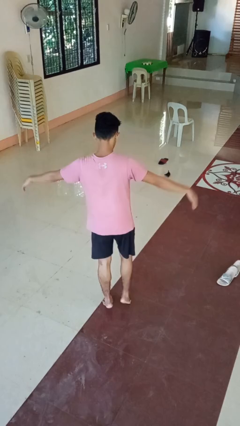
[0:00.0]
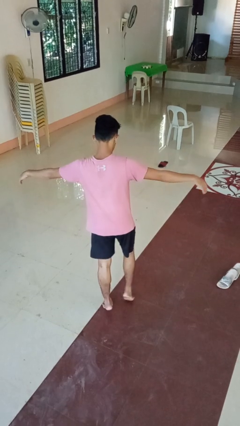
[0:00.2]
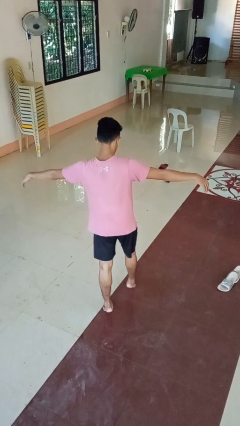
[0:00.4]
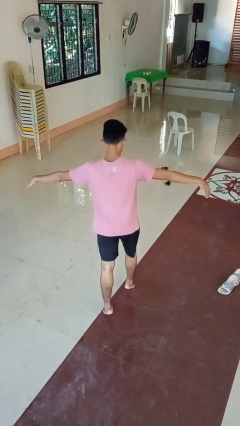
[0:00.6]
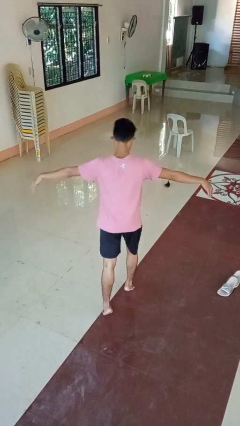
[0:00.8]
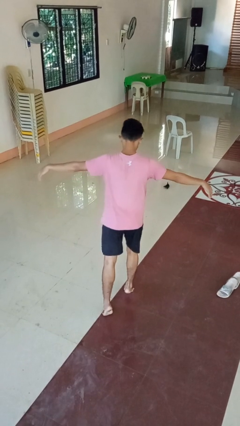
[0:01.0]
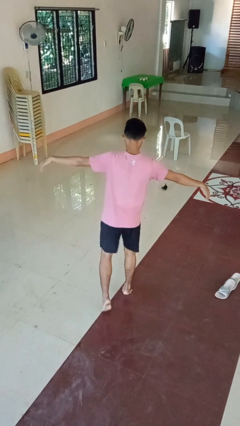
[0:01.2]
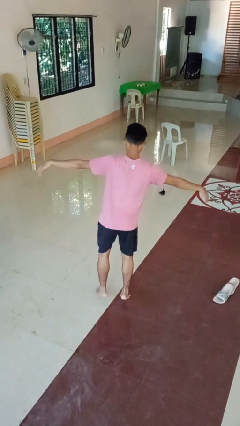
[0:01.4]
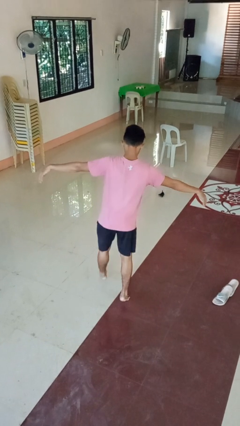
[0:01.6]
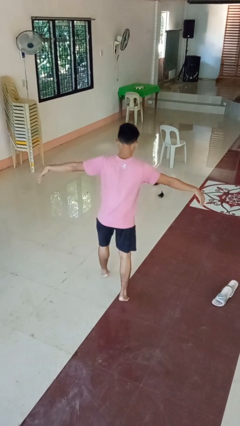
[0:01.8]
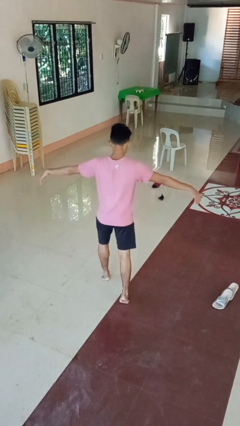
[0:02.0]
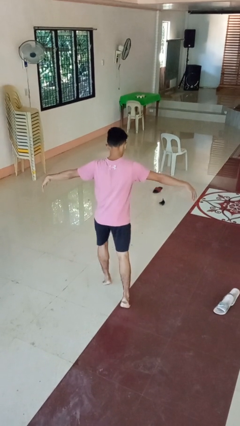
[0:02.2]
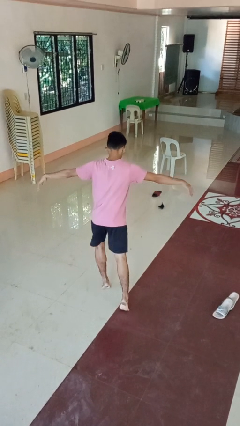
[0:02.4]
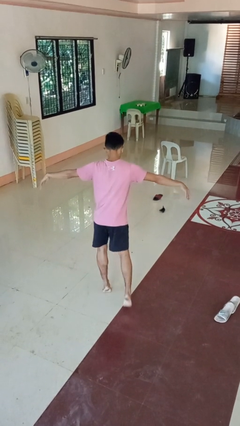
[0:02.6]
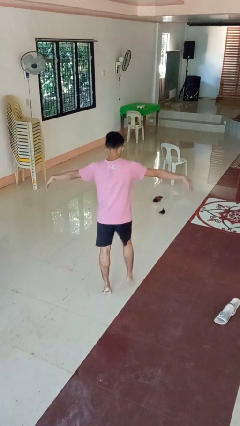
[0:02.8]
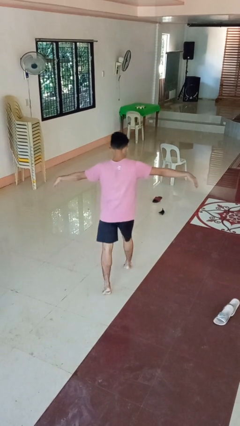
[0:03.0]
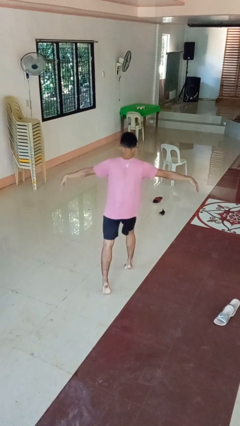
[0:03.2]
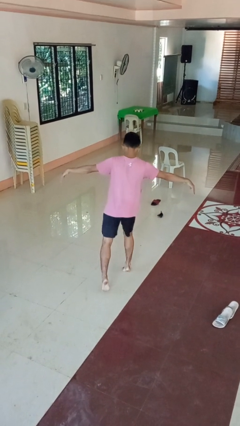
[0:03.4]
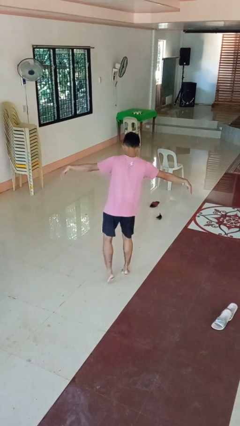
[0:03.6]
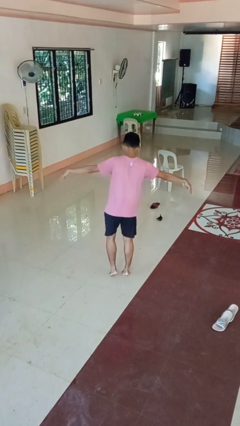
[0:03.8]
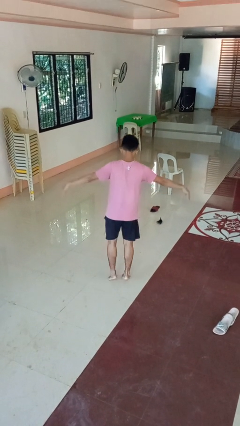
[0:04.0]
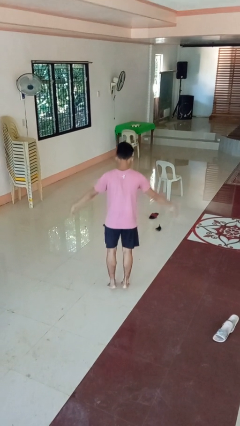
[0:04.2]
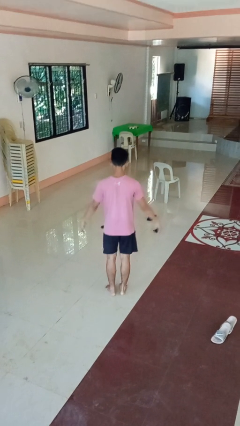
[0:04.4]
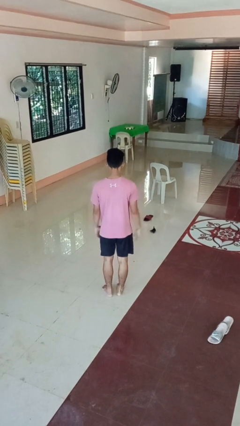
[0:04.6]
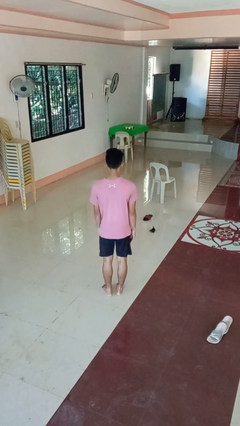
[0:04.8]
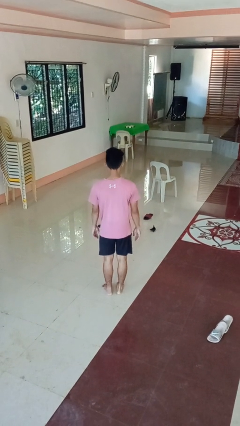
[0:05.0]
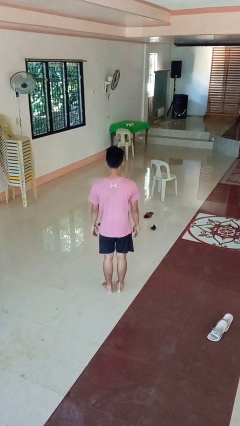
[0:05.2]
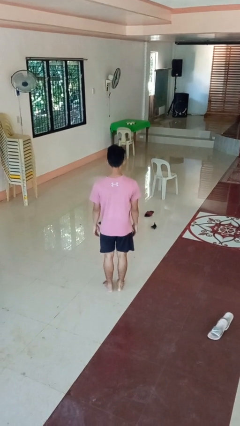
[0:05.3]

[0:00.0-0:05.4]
person walks tiptoe

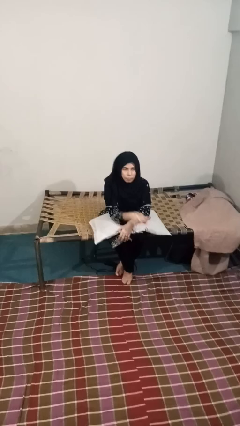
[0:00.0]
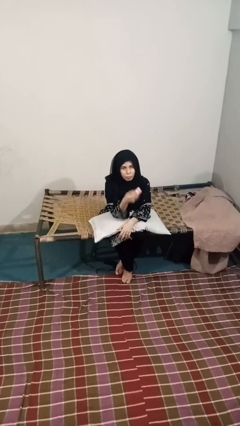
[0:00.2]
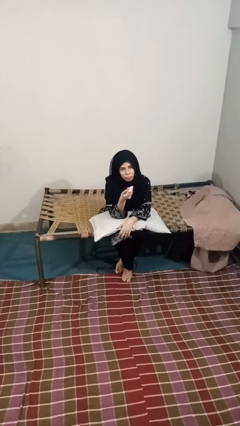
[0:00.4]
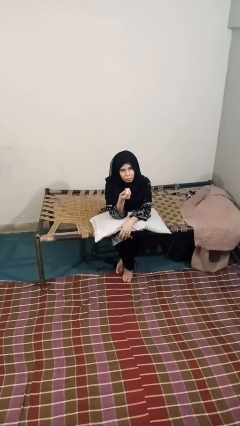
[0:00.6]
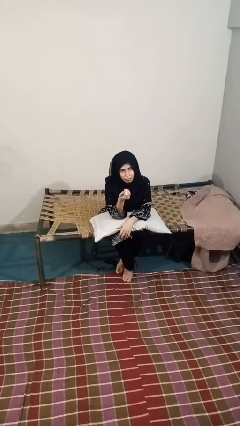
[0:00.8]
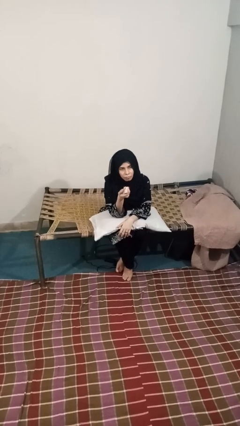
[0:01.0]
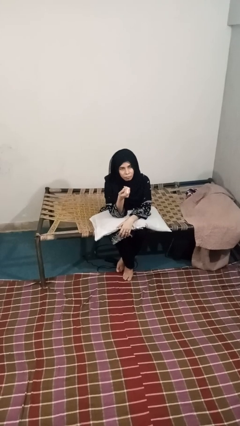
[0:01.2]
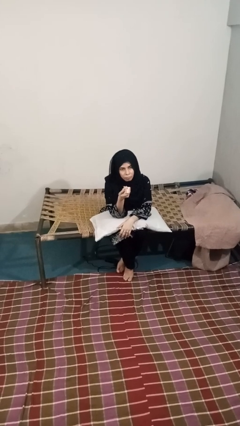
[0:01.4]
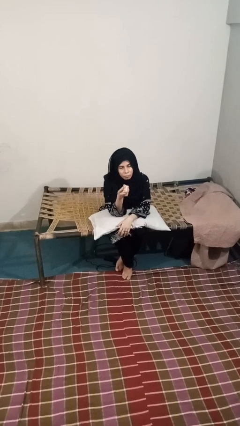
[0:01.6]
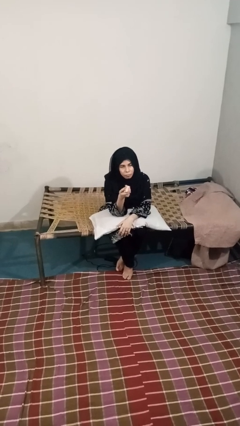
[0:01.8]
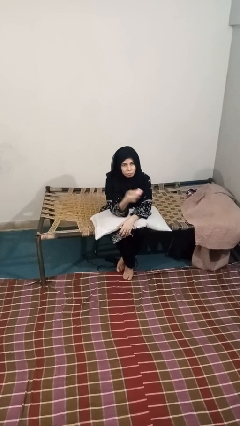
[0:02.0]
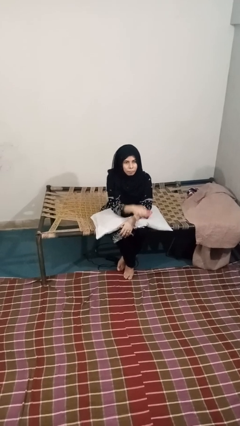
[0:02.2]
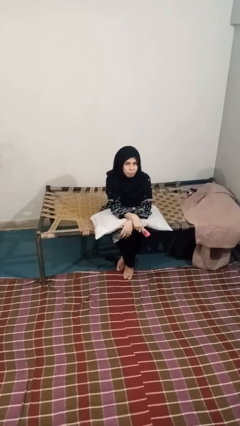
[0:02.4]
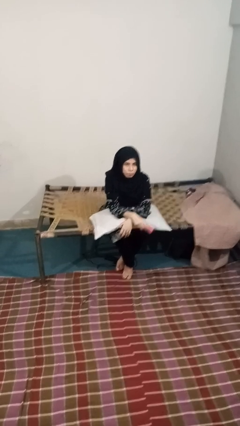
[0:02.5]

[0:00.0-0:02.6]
person uses television remote

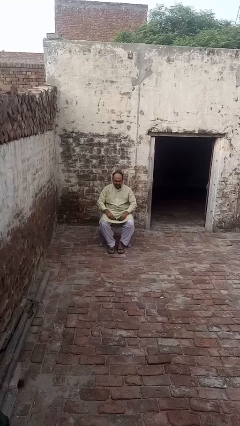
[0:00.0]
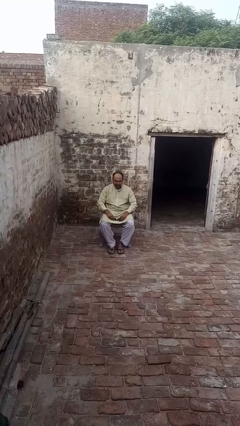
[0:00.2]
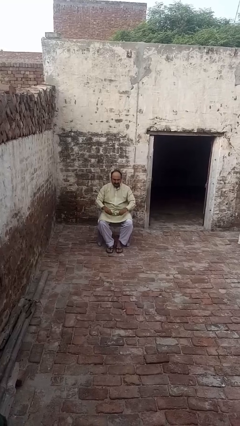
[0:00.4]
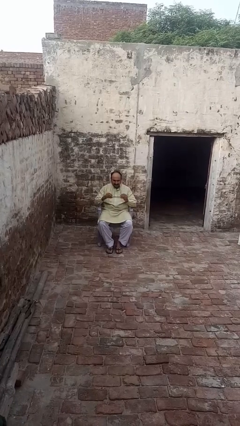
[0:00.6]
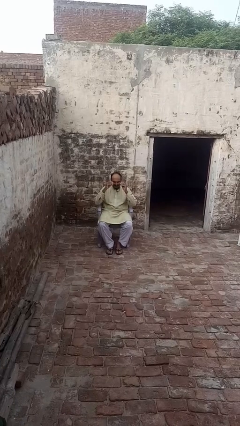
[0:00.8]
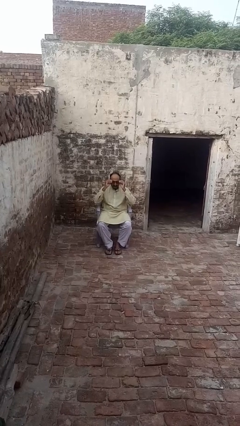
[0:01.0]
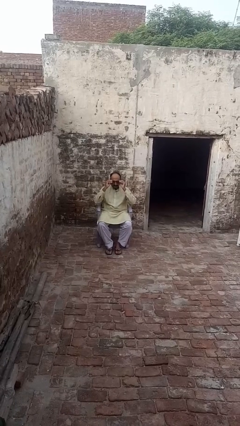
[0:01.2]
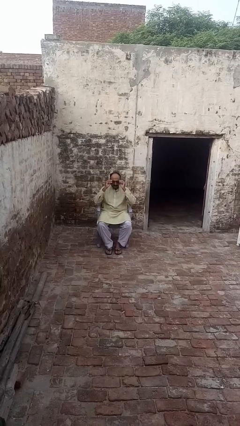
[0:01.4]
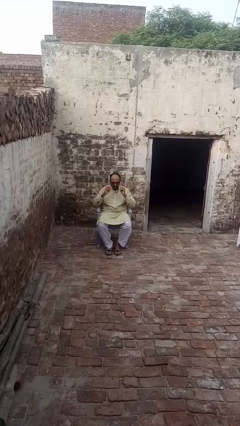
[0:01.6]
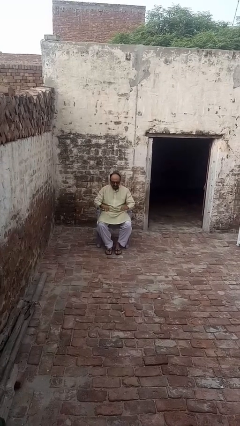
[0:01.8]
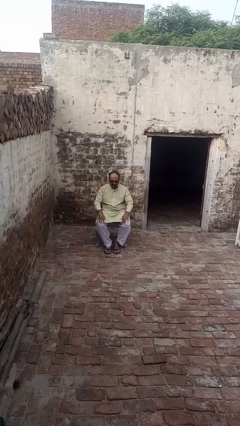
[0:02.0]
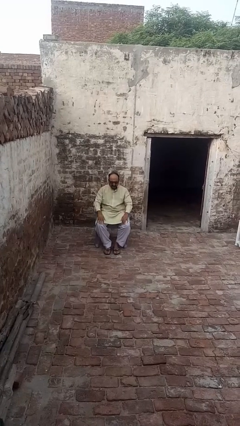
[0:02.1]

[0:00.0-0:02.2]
person puts on sunglasses

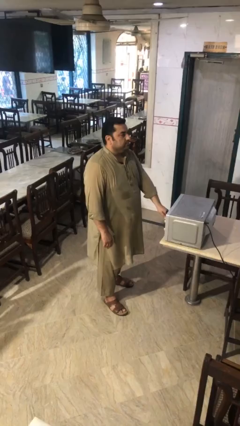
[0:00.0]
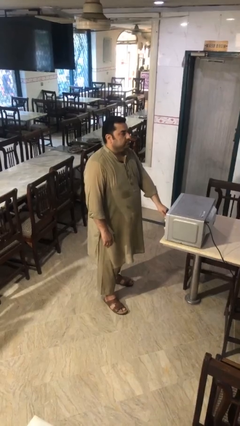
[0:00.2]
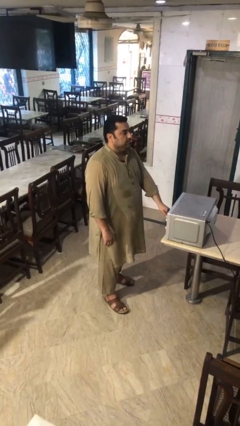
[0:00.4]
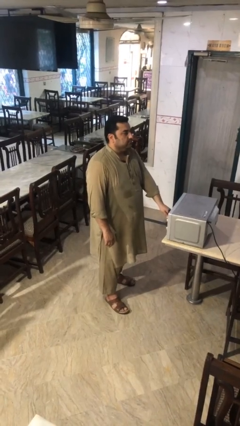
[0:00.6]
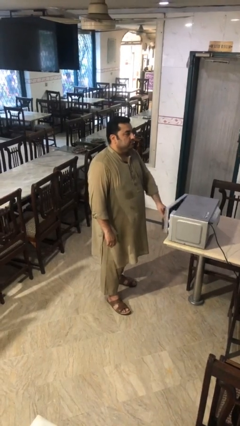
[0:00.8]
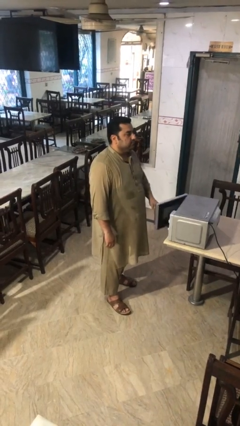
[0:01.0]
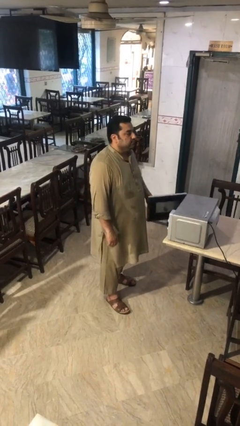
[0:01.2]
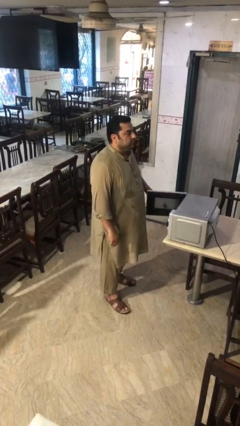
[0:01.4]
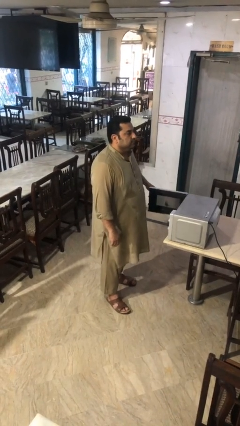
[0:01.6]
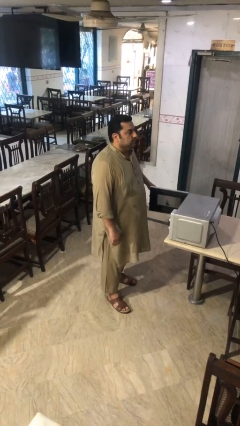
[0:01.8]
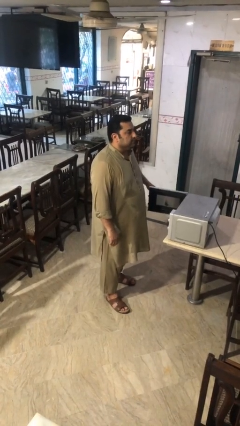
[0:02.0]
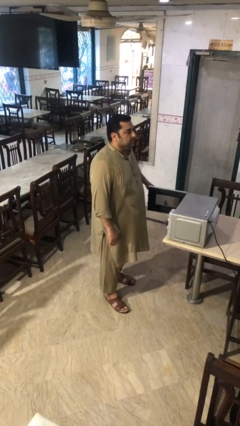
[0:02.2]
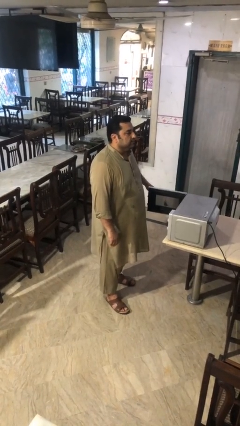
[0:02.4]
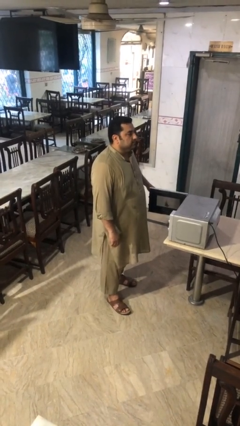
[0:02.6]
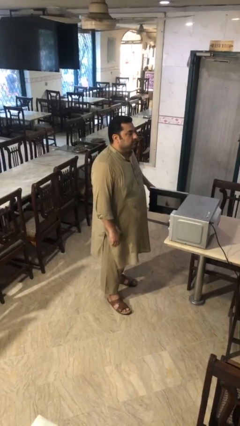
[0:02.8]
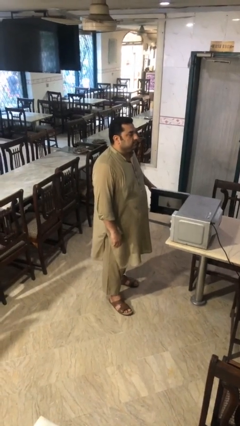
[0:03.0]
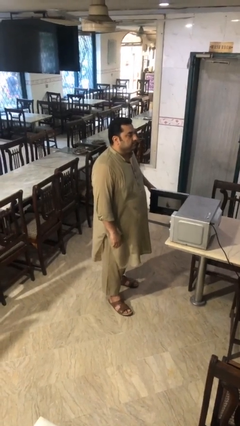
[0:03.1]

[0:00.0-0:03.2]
person opens microwave

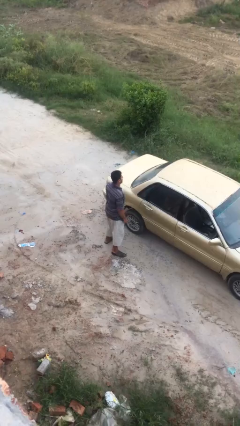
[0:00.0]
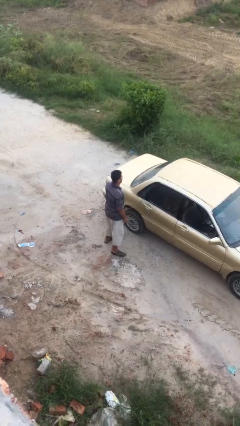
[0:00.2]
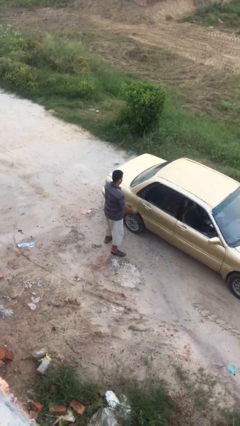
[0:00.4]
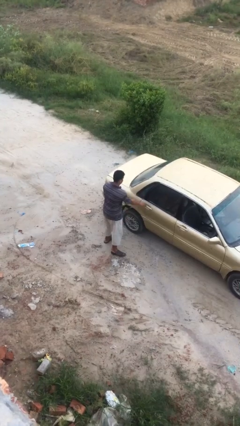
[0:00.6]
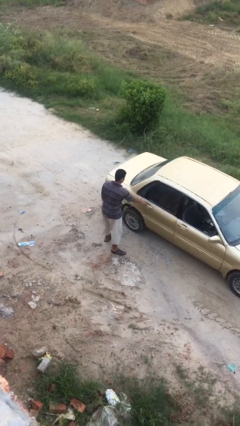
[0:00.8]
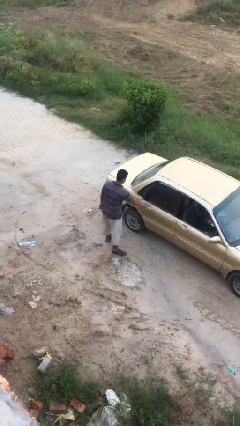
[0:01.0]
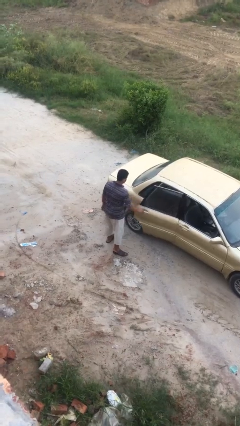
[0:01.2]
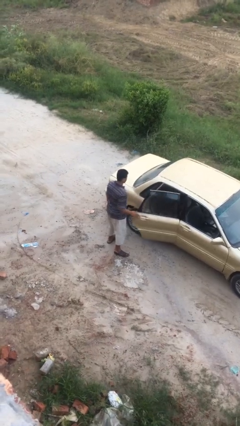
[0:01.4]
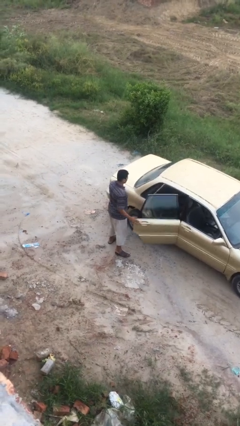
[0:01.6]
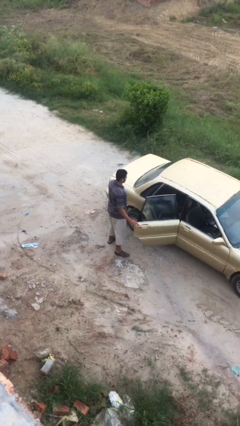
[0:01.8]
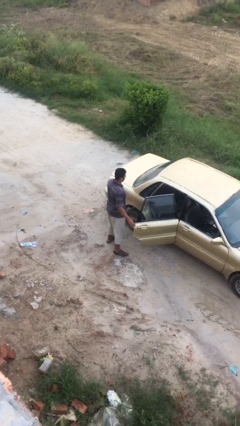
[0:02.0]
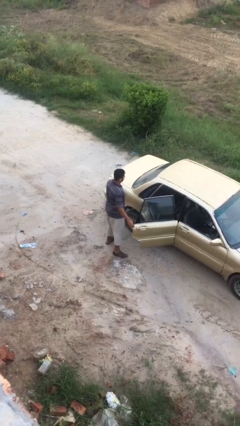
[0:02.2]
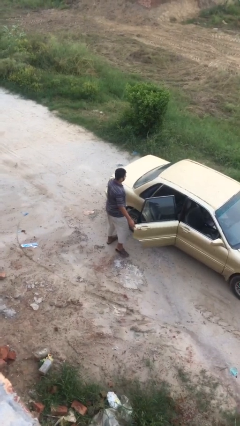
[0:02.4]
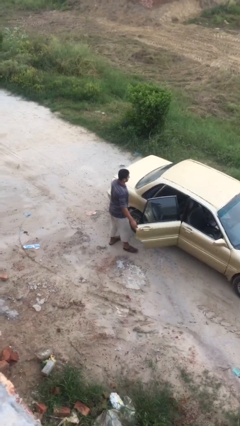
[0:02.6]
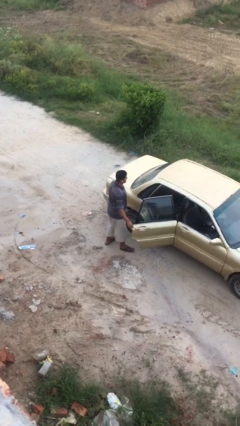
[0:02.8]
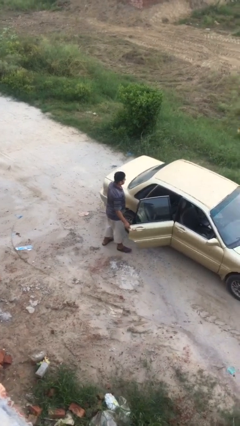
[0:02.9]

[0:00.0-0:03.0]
person opens car door

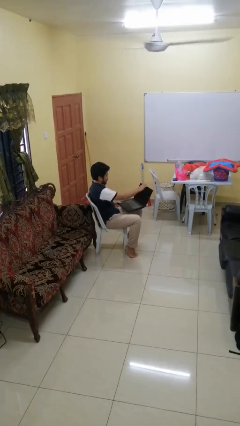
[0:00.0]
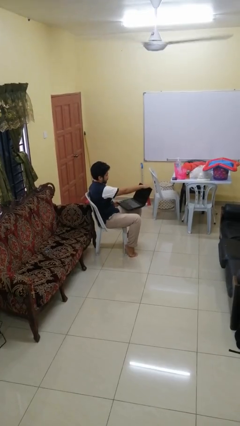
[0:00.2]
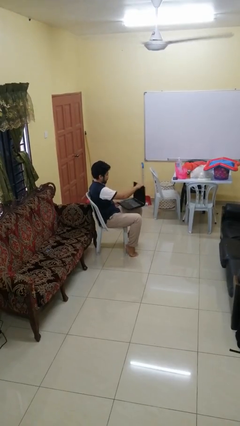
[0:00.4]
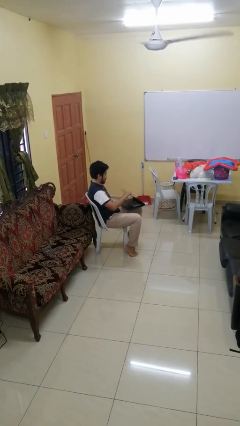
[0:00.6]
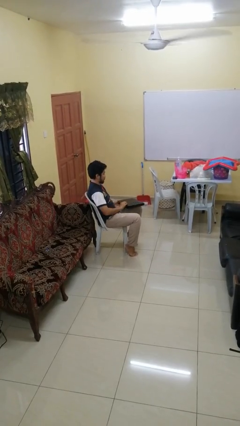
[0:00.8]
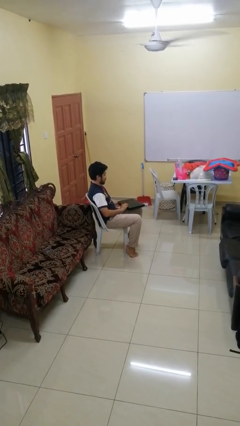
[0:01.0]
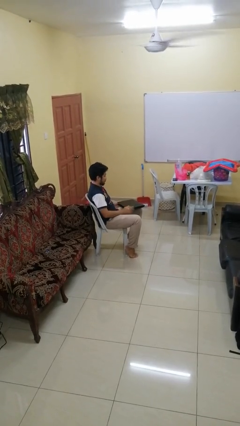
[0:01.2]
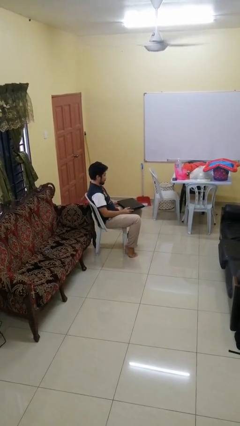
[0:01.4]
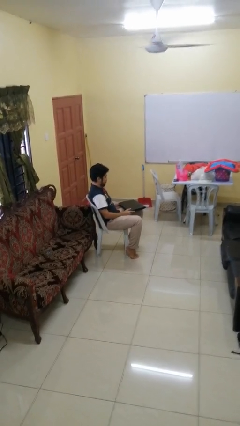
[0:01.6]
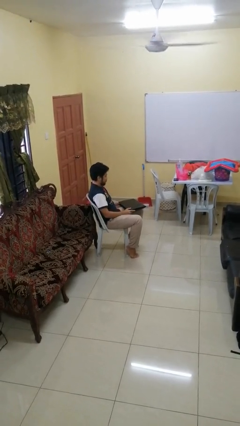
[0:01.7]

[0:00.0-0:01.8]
person closes laptop
